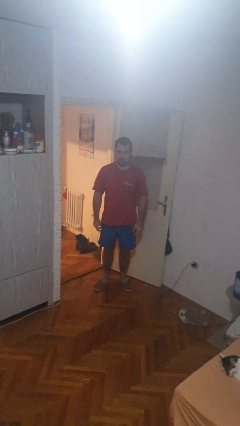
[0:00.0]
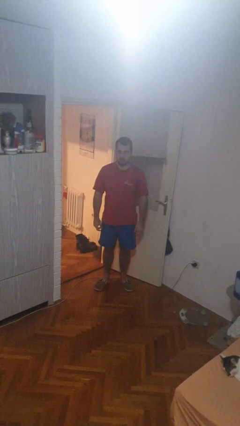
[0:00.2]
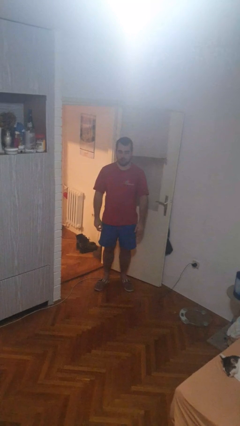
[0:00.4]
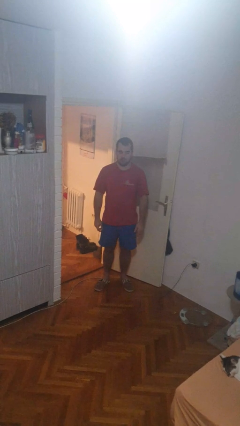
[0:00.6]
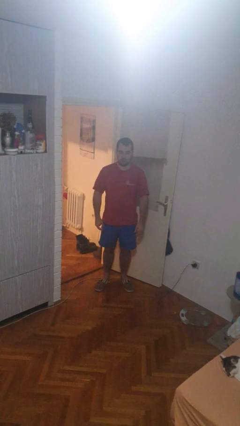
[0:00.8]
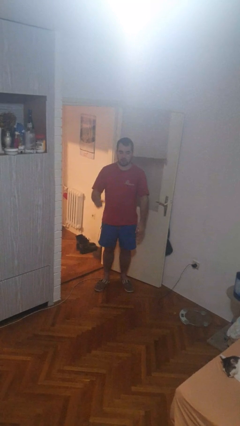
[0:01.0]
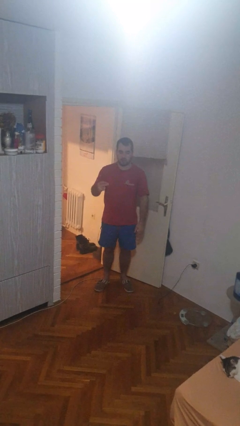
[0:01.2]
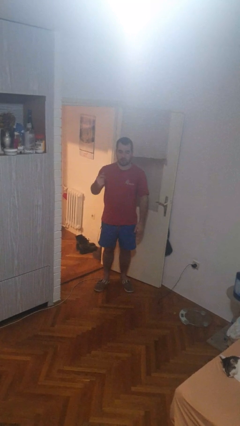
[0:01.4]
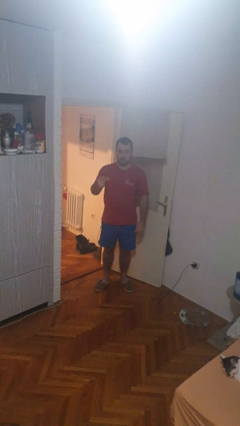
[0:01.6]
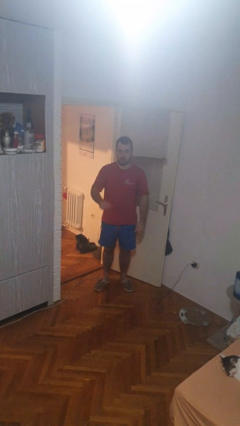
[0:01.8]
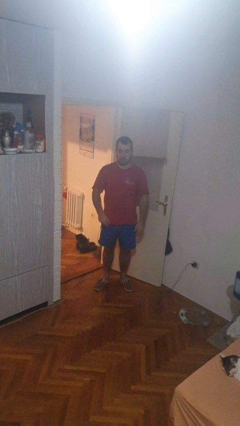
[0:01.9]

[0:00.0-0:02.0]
person snaps fingers

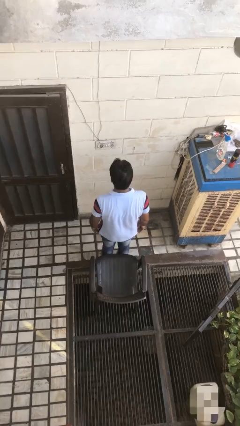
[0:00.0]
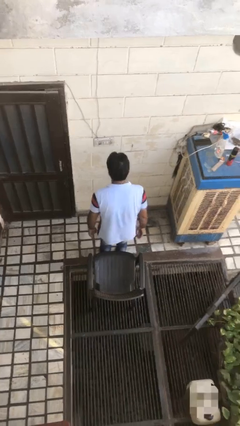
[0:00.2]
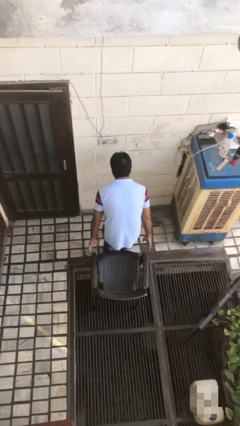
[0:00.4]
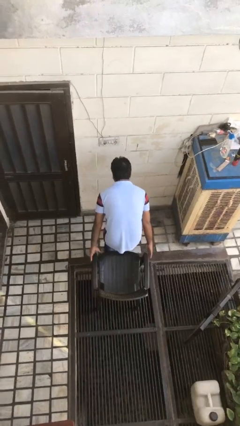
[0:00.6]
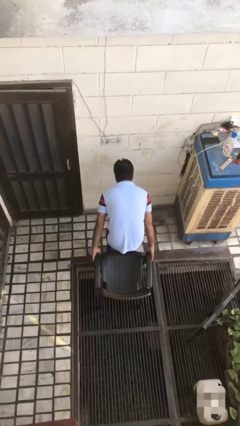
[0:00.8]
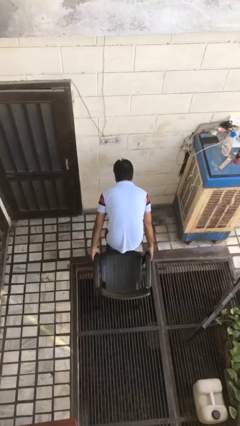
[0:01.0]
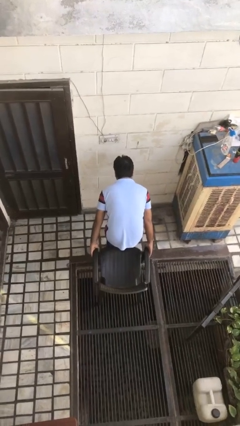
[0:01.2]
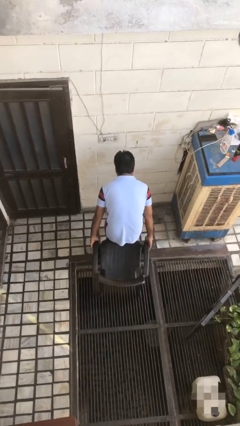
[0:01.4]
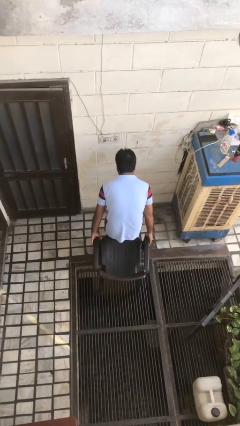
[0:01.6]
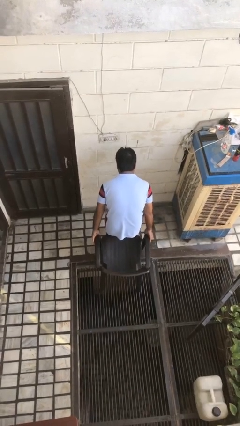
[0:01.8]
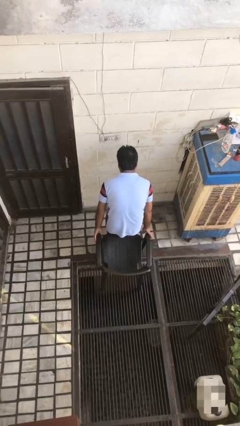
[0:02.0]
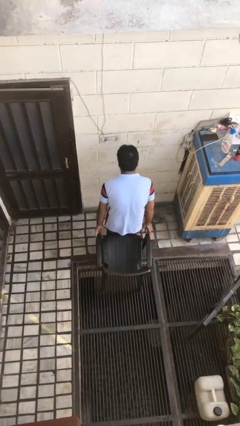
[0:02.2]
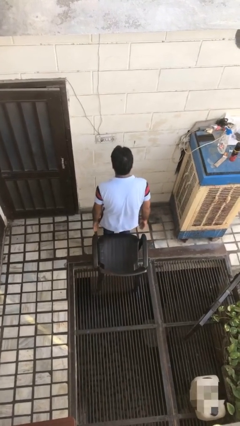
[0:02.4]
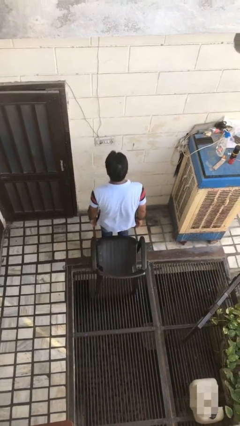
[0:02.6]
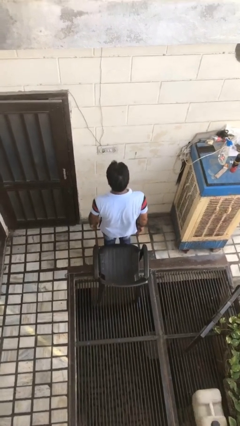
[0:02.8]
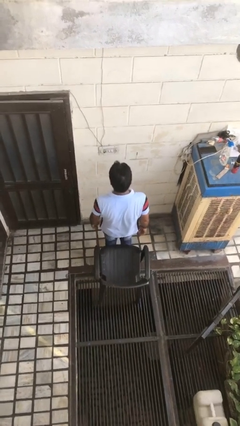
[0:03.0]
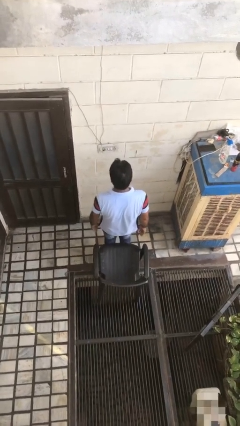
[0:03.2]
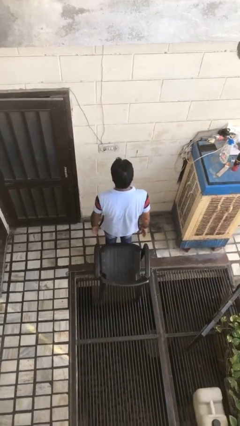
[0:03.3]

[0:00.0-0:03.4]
person pulls out chair

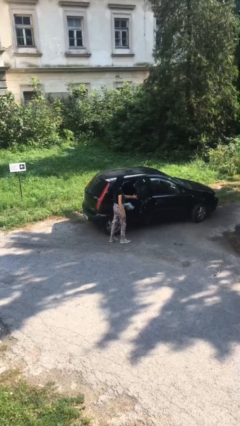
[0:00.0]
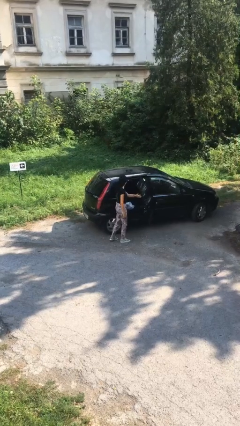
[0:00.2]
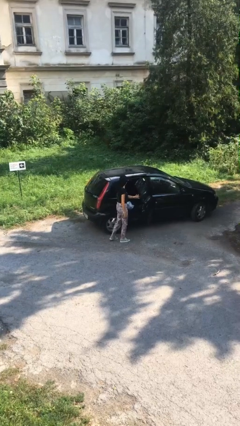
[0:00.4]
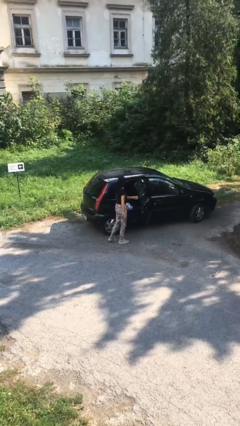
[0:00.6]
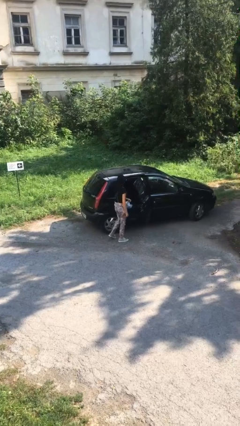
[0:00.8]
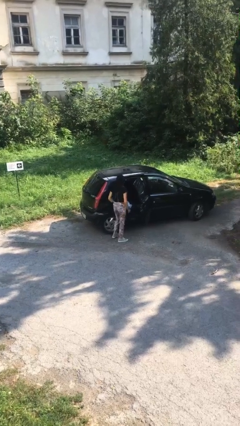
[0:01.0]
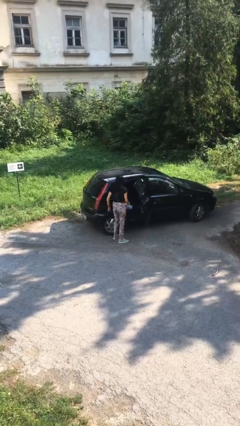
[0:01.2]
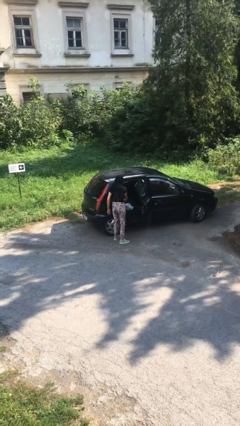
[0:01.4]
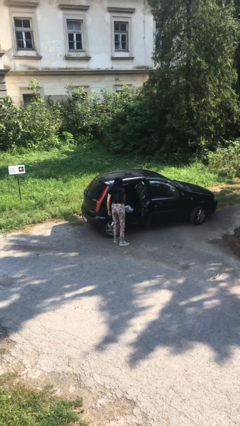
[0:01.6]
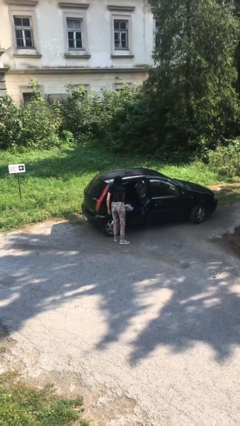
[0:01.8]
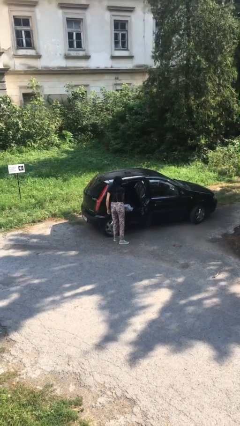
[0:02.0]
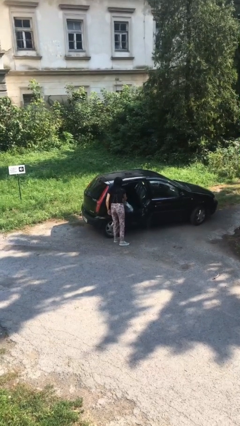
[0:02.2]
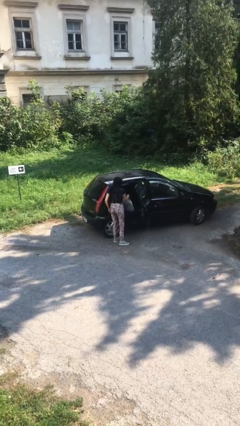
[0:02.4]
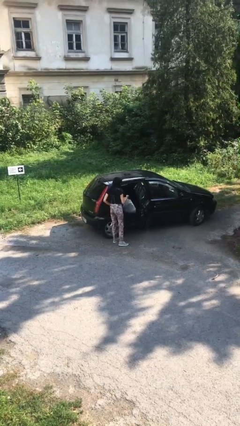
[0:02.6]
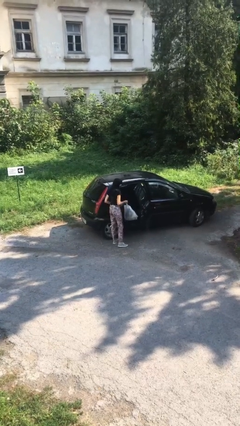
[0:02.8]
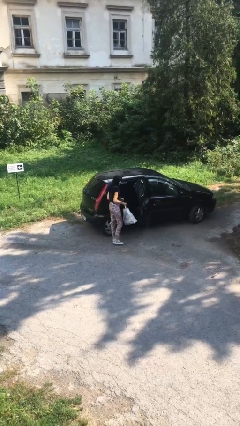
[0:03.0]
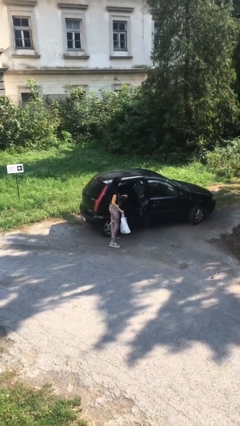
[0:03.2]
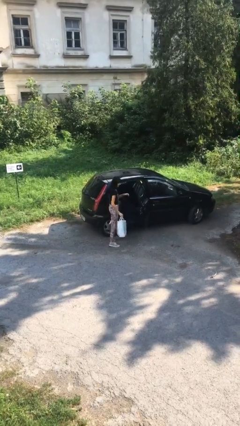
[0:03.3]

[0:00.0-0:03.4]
person unloads car

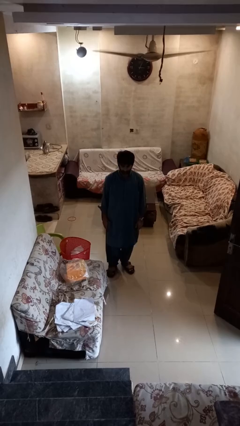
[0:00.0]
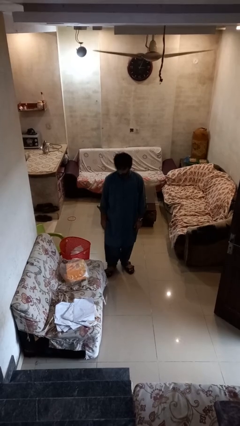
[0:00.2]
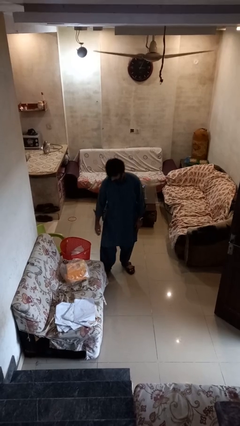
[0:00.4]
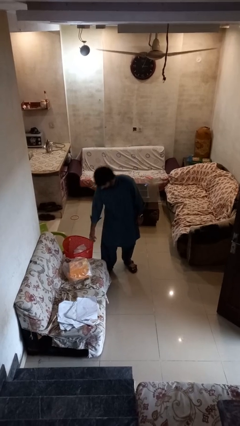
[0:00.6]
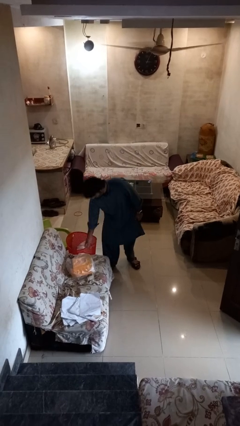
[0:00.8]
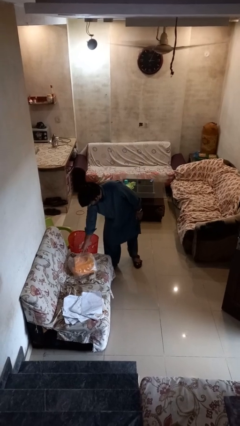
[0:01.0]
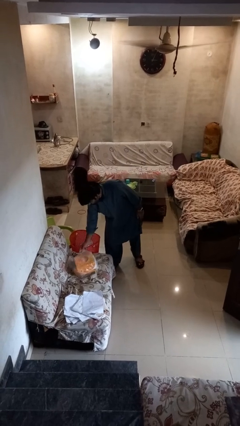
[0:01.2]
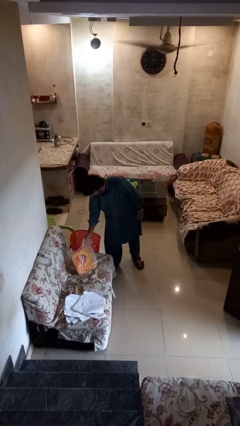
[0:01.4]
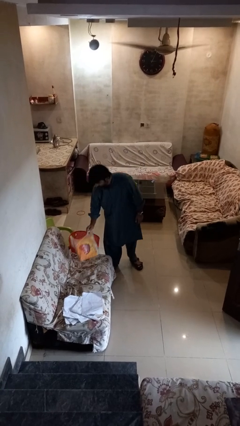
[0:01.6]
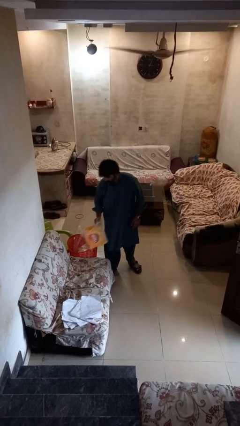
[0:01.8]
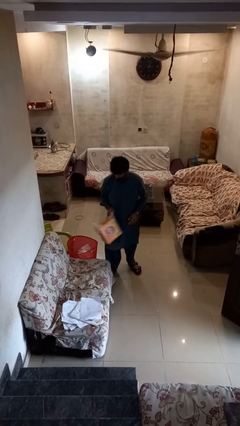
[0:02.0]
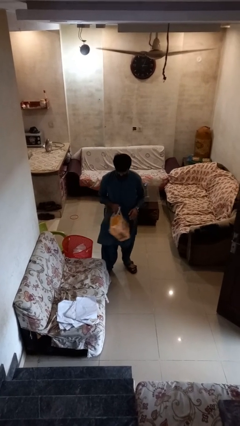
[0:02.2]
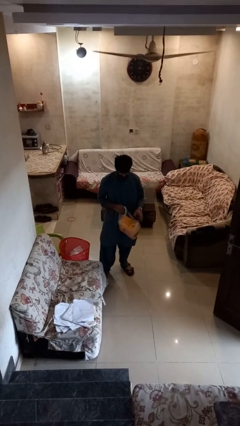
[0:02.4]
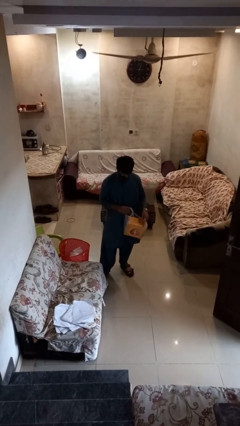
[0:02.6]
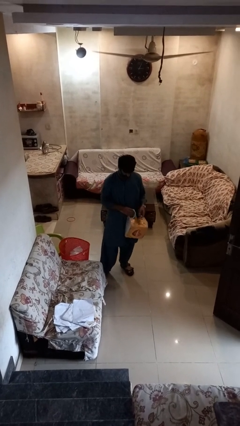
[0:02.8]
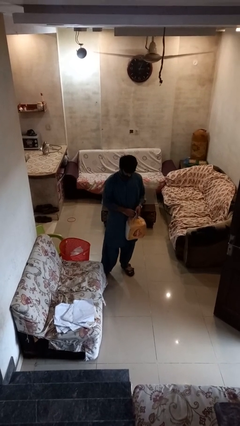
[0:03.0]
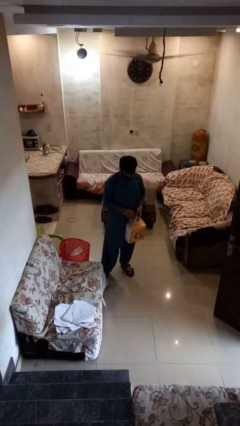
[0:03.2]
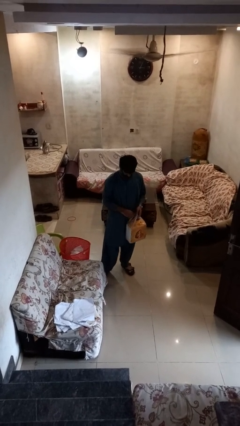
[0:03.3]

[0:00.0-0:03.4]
person picks up object from couch

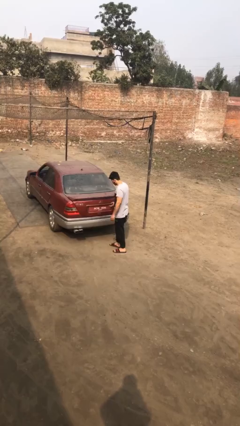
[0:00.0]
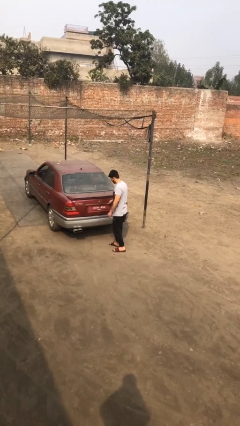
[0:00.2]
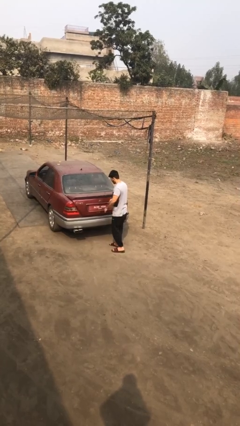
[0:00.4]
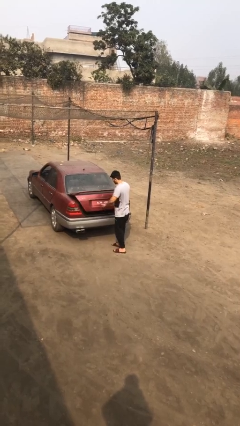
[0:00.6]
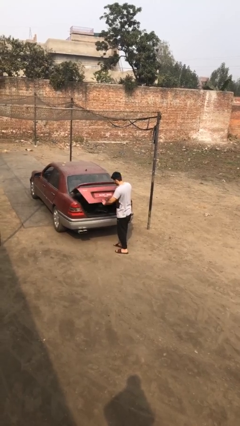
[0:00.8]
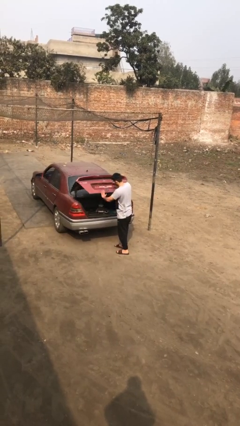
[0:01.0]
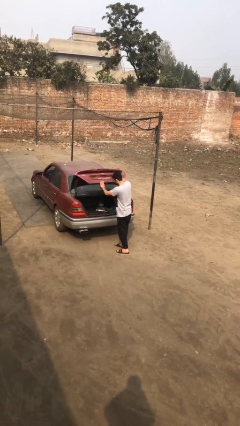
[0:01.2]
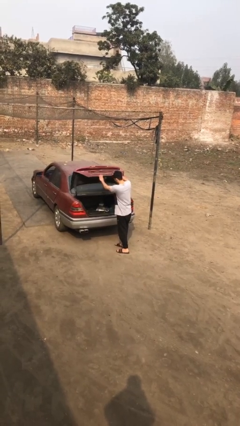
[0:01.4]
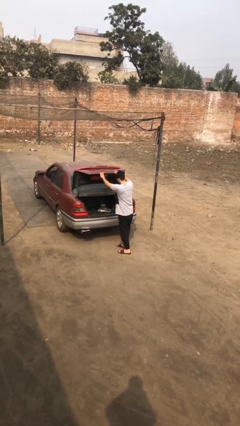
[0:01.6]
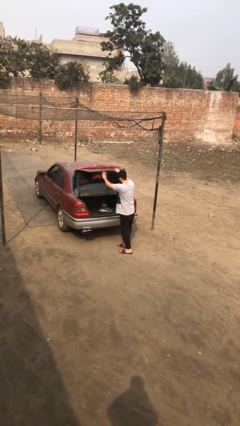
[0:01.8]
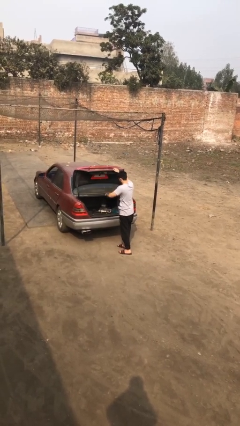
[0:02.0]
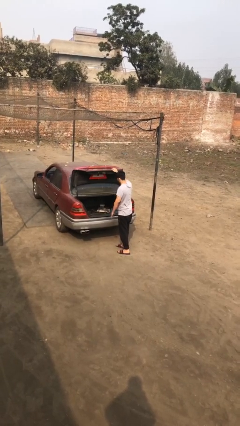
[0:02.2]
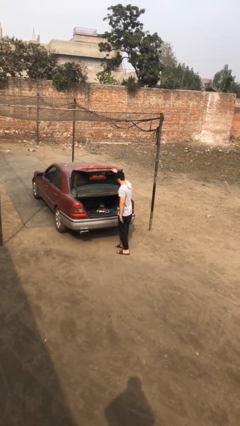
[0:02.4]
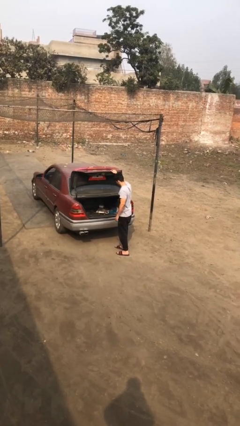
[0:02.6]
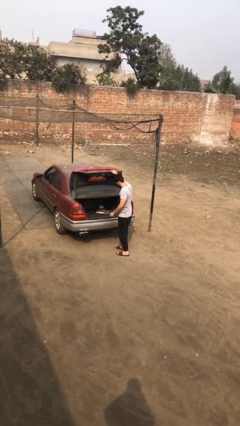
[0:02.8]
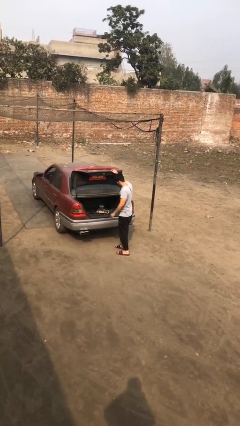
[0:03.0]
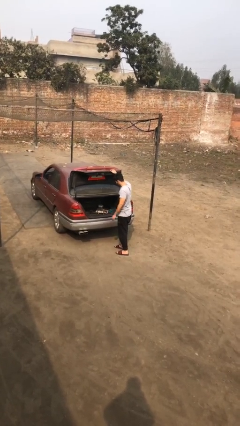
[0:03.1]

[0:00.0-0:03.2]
person opens car trunk

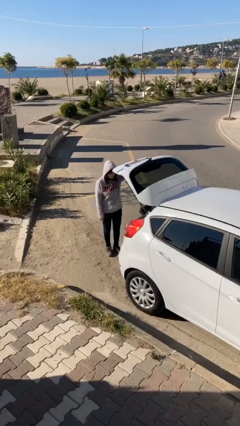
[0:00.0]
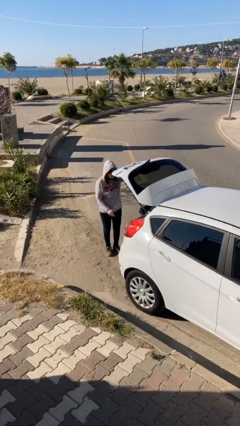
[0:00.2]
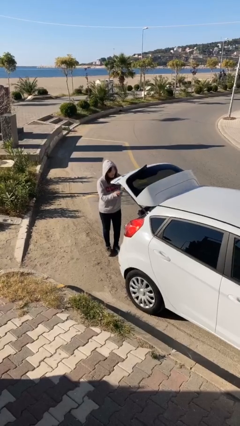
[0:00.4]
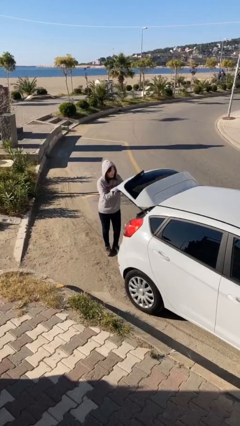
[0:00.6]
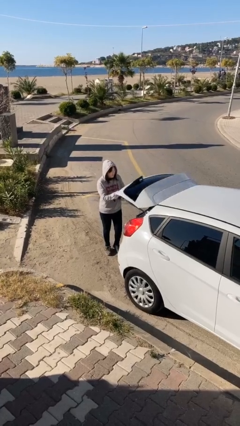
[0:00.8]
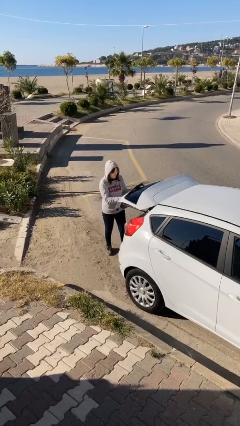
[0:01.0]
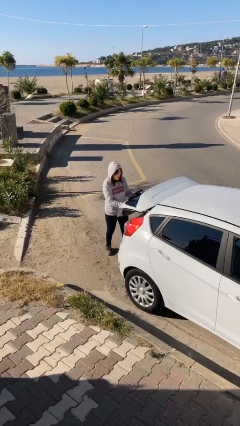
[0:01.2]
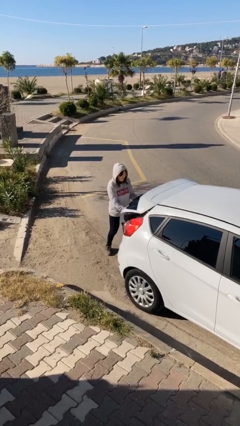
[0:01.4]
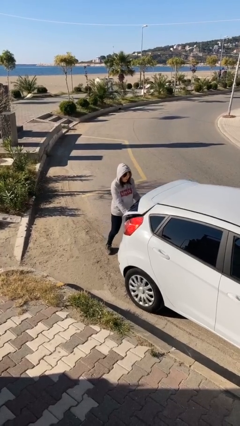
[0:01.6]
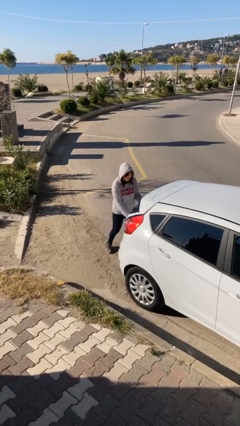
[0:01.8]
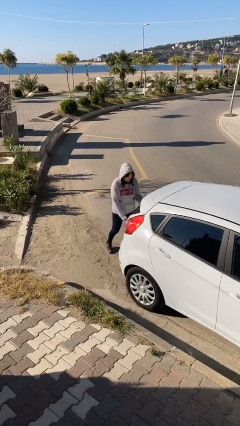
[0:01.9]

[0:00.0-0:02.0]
person closes car trunk
